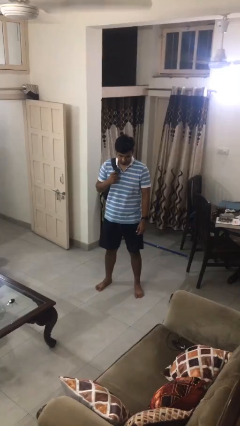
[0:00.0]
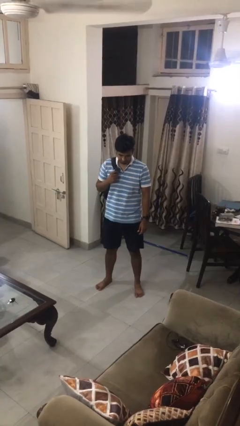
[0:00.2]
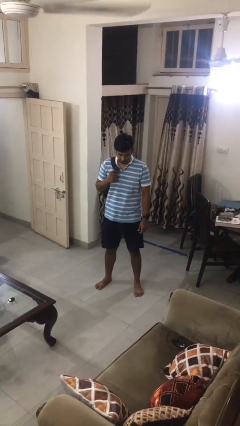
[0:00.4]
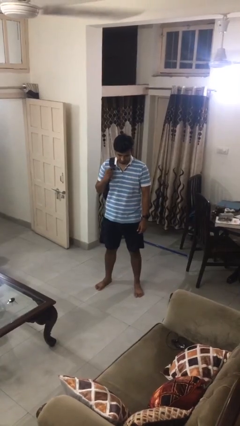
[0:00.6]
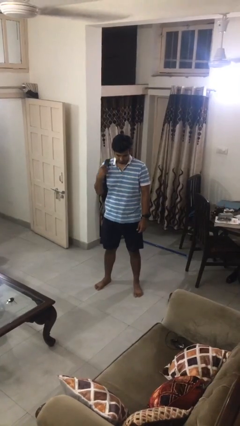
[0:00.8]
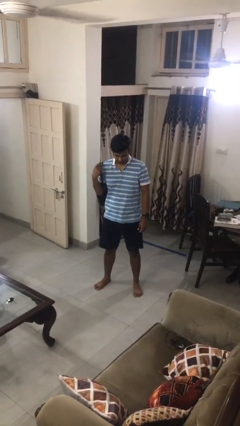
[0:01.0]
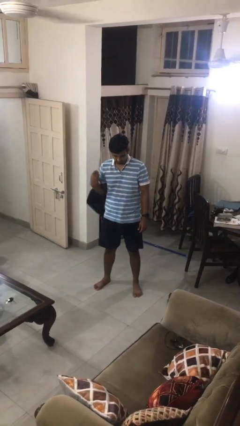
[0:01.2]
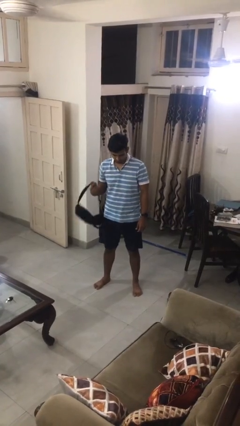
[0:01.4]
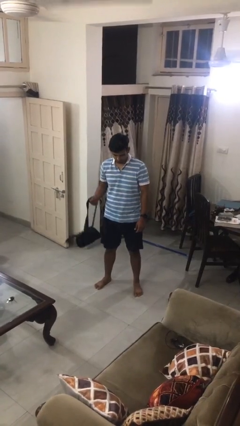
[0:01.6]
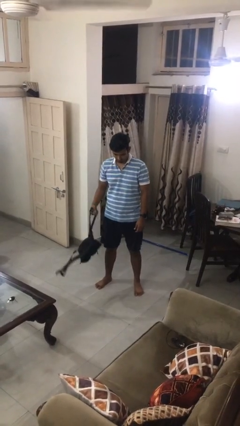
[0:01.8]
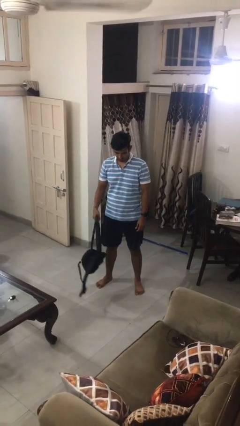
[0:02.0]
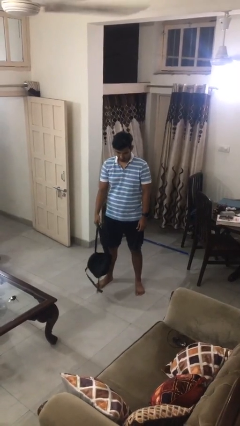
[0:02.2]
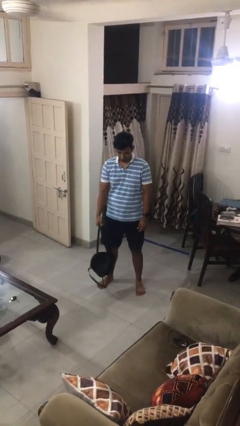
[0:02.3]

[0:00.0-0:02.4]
person takes off backpack

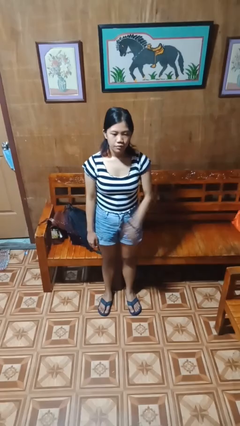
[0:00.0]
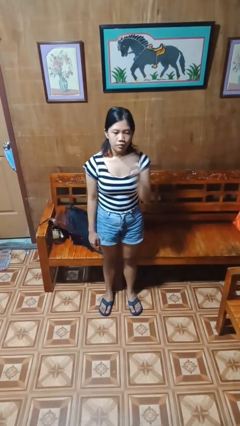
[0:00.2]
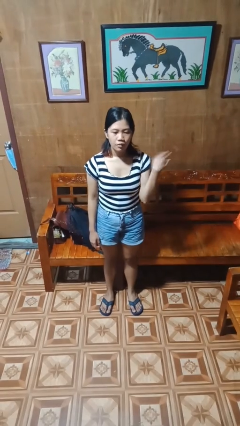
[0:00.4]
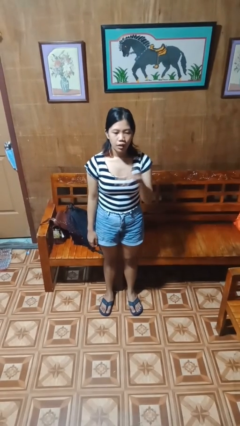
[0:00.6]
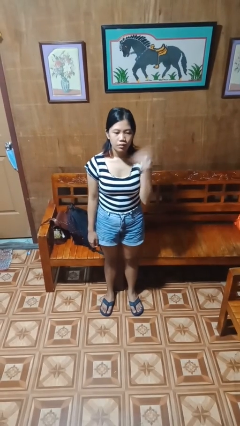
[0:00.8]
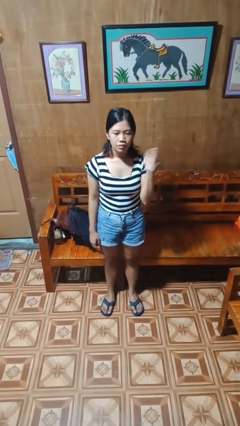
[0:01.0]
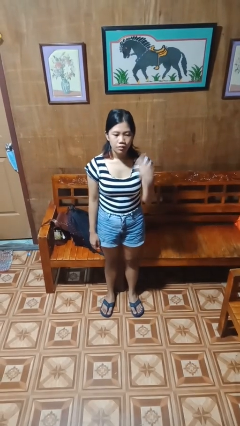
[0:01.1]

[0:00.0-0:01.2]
person gestures cut

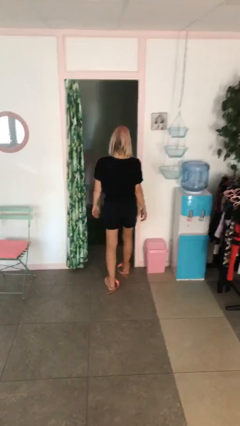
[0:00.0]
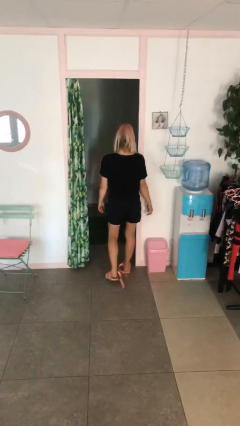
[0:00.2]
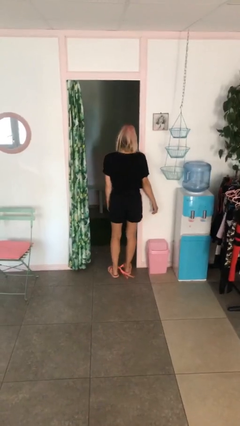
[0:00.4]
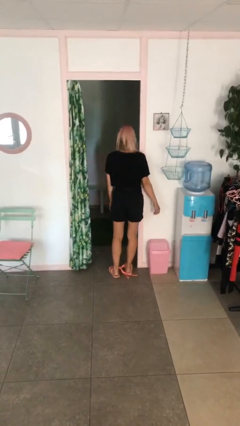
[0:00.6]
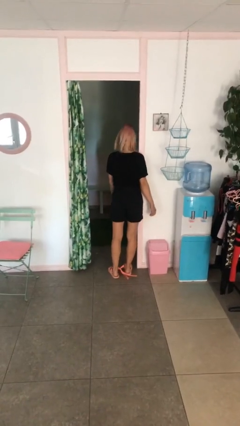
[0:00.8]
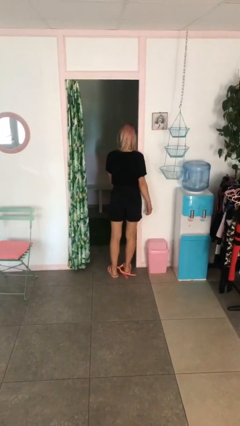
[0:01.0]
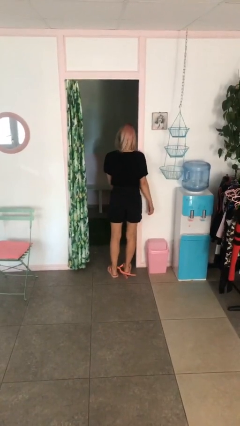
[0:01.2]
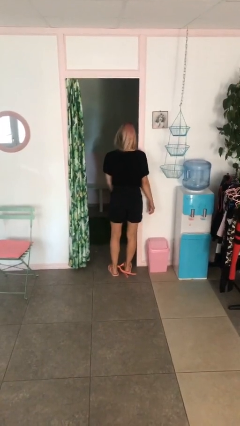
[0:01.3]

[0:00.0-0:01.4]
person bumps into wall

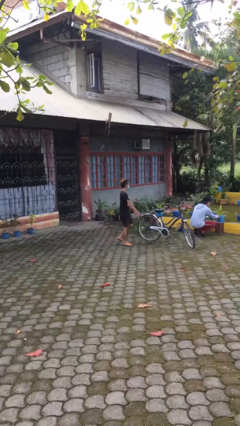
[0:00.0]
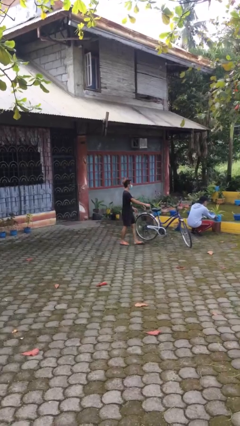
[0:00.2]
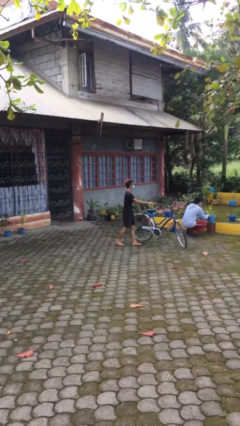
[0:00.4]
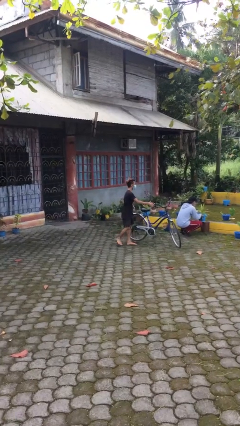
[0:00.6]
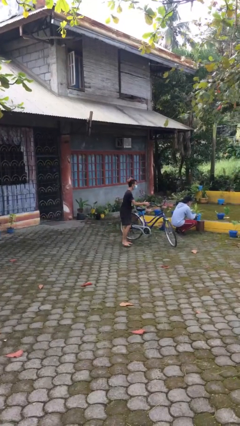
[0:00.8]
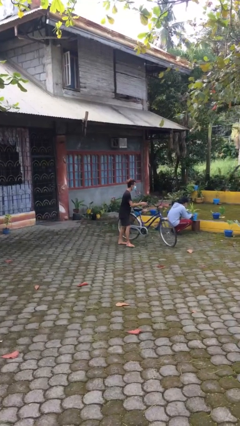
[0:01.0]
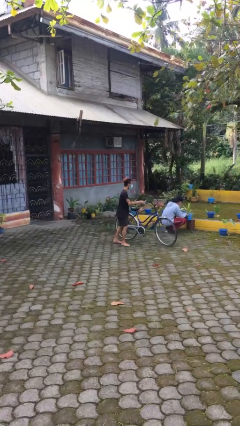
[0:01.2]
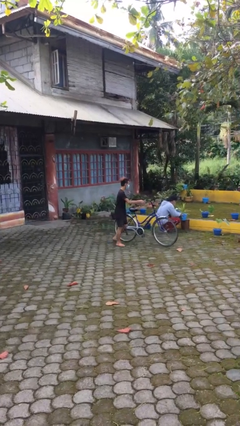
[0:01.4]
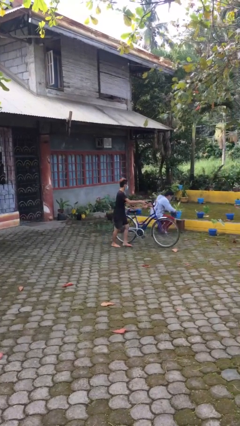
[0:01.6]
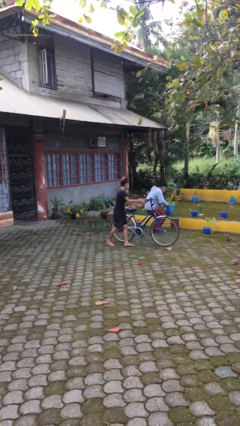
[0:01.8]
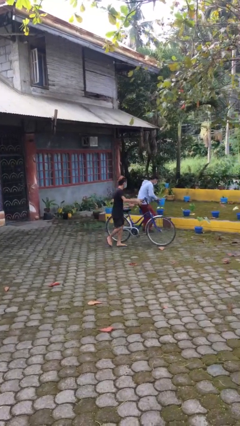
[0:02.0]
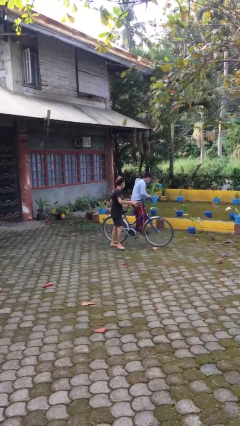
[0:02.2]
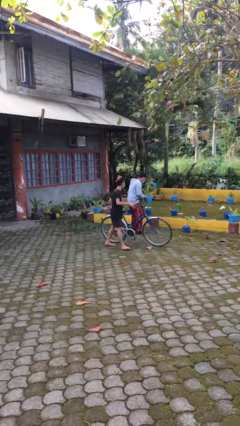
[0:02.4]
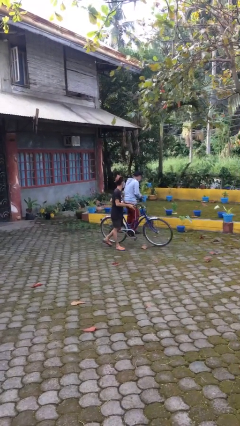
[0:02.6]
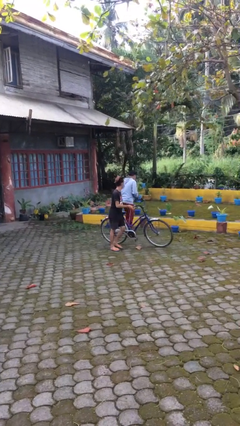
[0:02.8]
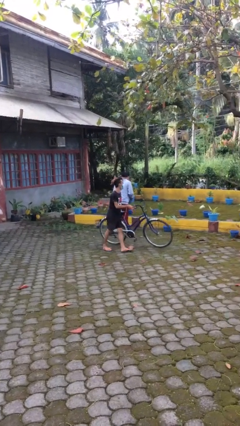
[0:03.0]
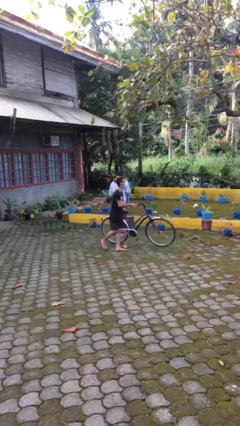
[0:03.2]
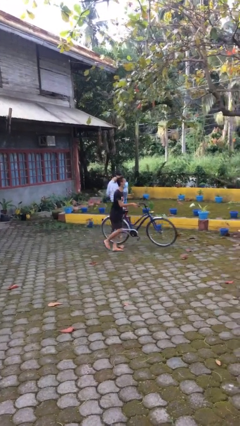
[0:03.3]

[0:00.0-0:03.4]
person steals object from person

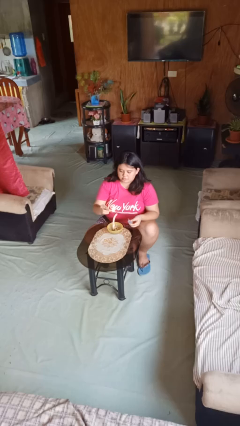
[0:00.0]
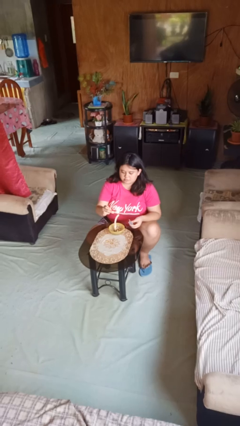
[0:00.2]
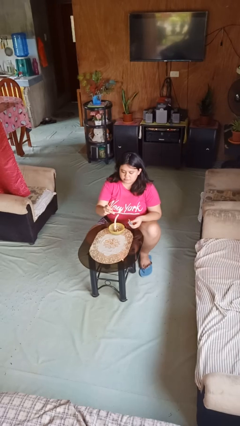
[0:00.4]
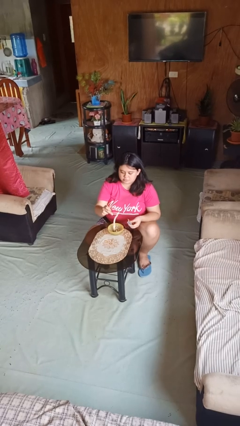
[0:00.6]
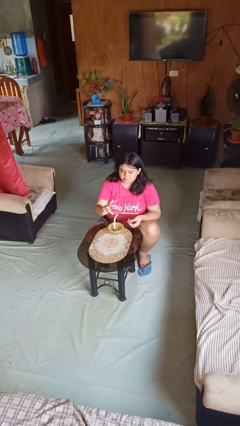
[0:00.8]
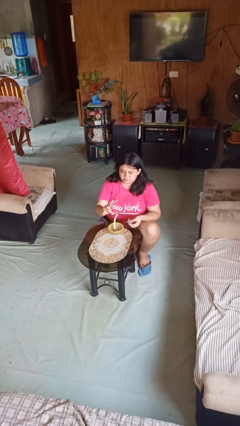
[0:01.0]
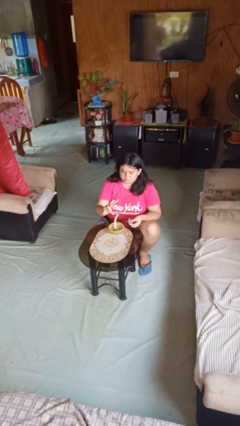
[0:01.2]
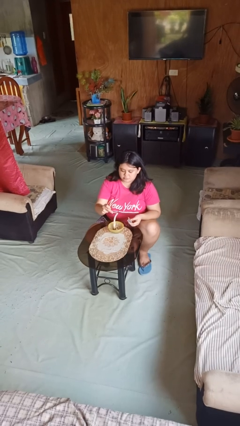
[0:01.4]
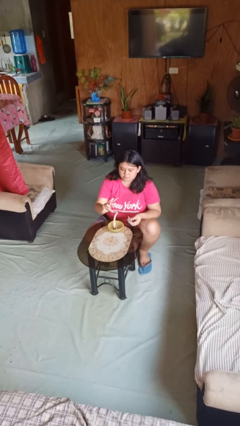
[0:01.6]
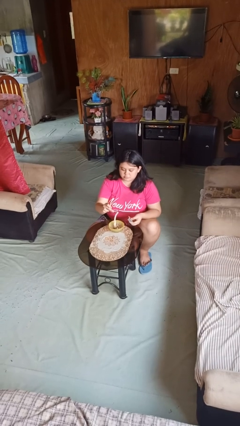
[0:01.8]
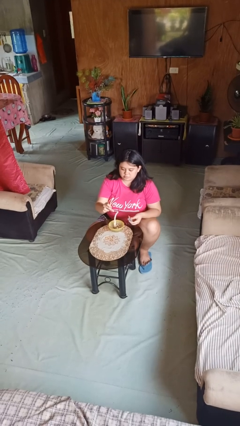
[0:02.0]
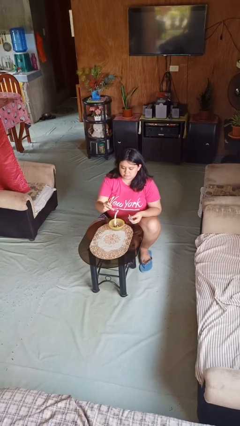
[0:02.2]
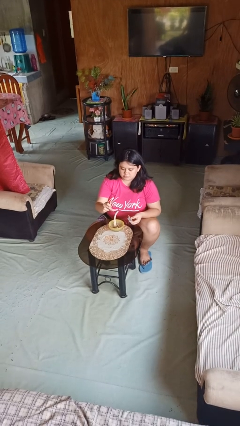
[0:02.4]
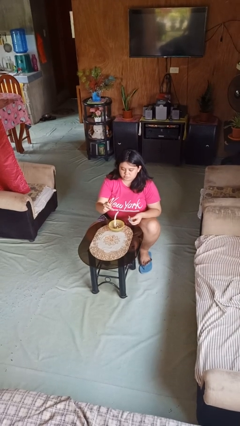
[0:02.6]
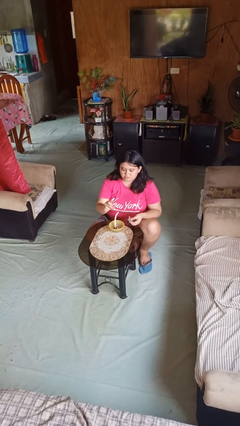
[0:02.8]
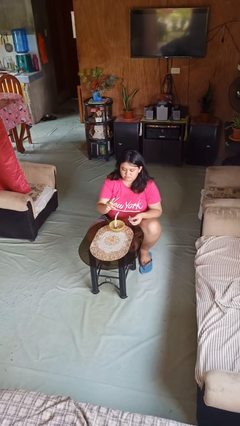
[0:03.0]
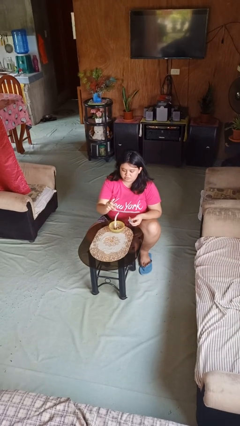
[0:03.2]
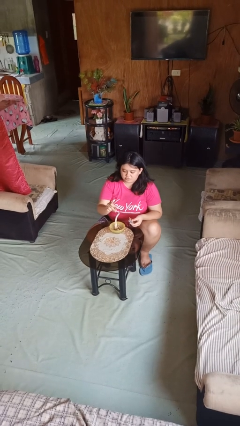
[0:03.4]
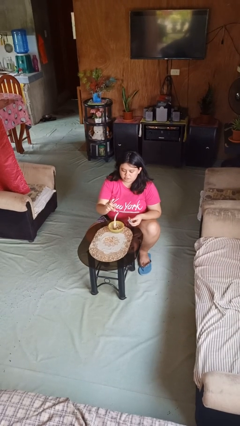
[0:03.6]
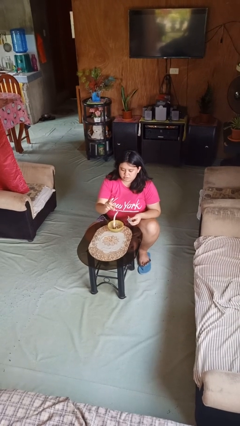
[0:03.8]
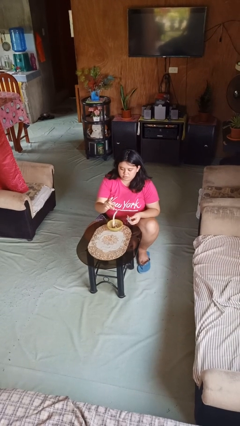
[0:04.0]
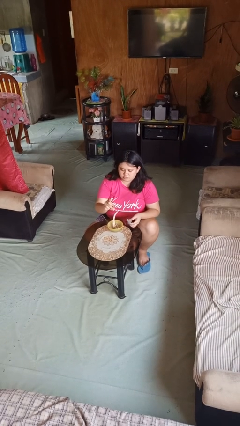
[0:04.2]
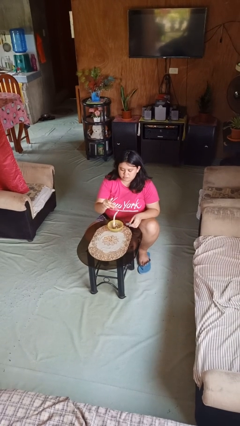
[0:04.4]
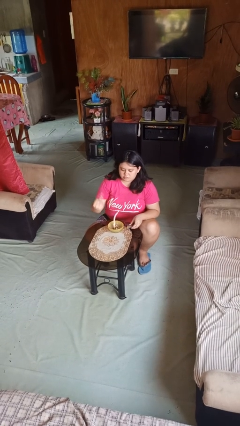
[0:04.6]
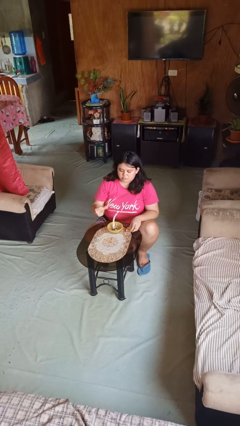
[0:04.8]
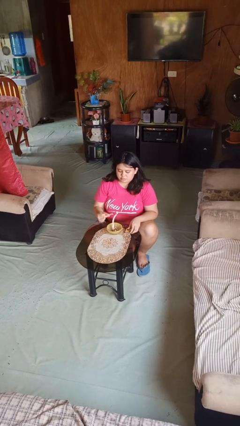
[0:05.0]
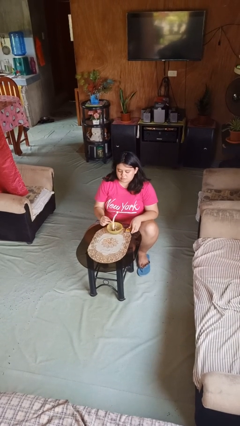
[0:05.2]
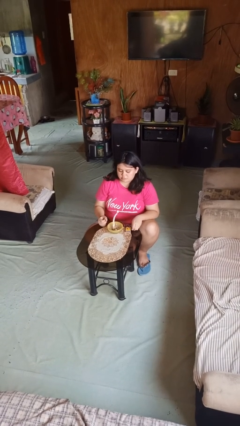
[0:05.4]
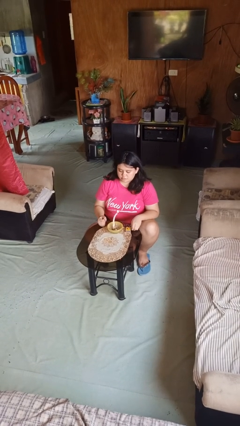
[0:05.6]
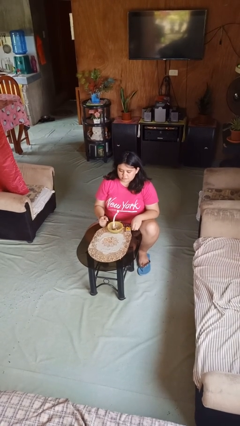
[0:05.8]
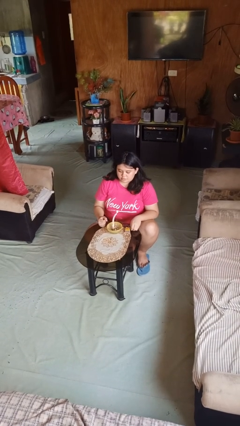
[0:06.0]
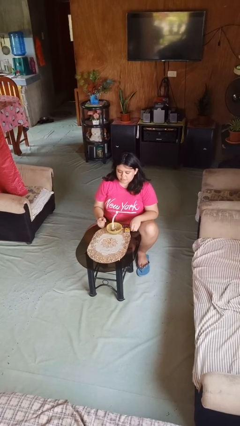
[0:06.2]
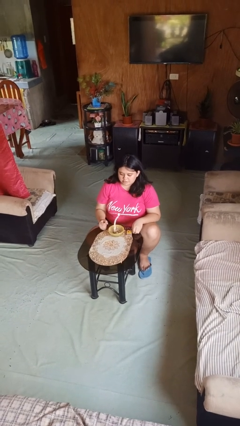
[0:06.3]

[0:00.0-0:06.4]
person lights candle

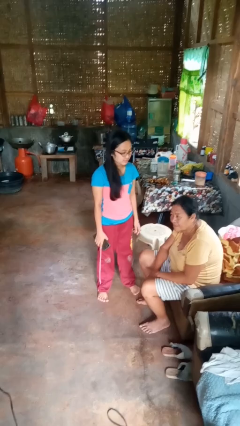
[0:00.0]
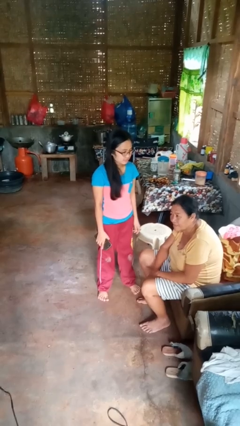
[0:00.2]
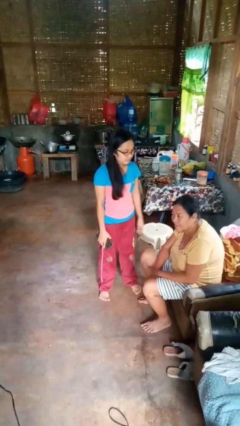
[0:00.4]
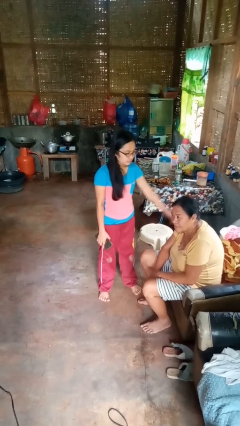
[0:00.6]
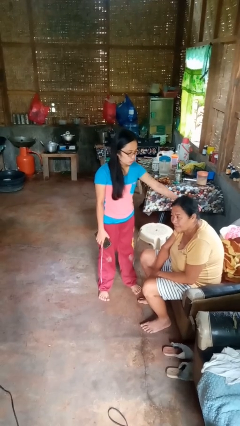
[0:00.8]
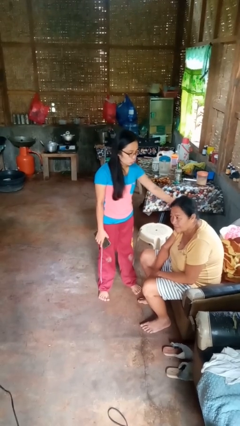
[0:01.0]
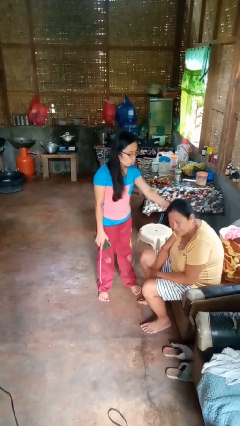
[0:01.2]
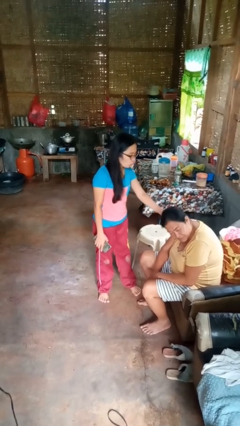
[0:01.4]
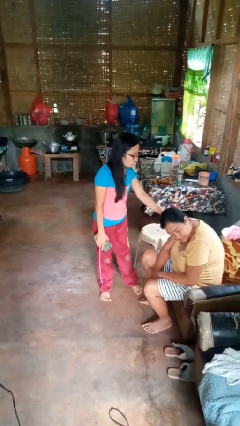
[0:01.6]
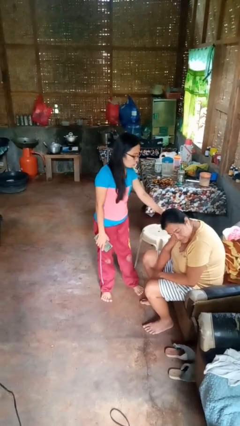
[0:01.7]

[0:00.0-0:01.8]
person grabs person by hair

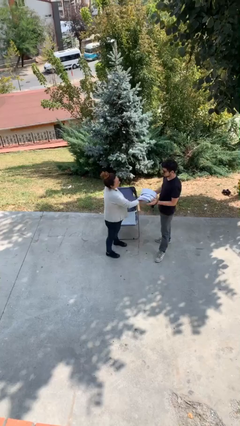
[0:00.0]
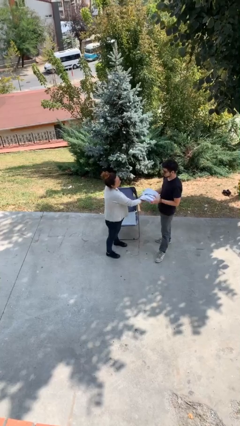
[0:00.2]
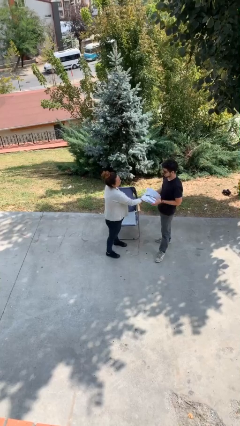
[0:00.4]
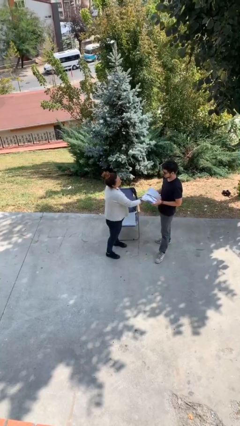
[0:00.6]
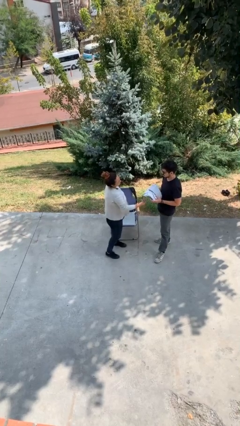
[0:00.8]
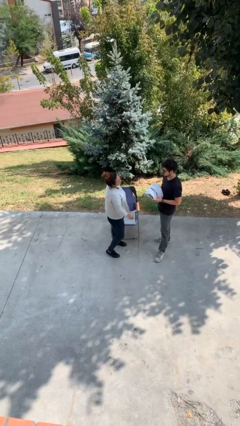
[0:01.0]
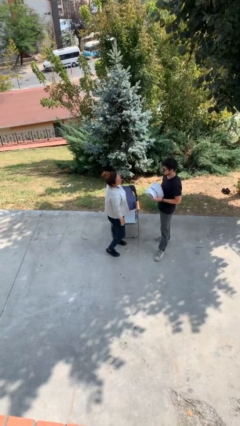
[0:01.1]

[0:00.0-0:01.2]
person transfers object to person
